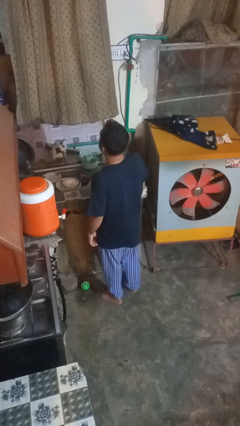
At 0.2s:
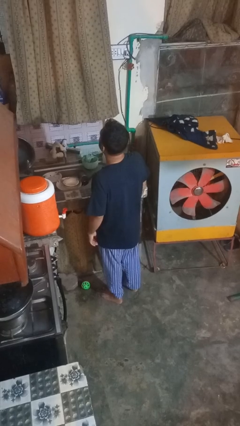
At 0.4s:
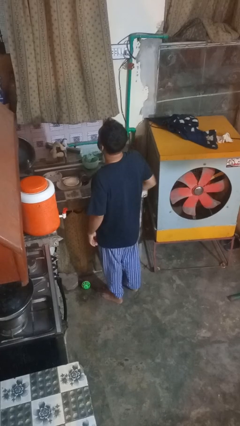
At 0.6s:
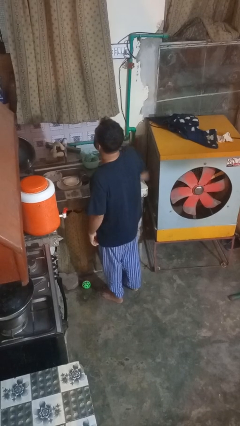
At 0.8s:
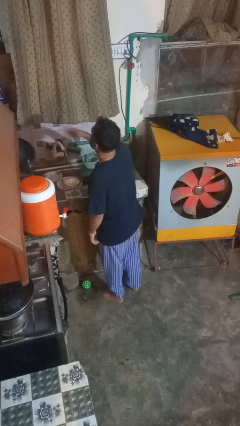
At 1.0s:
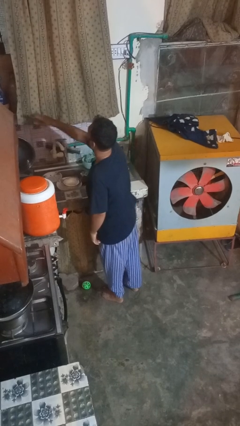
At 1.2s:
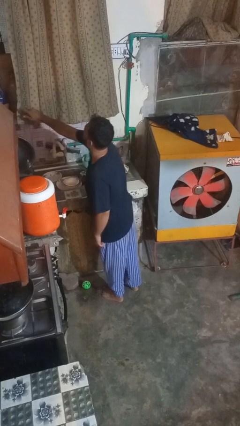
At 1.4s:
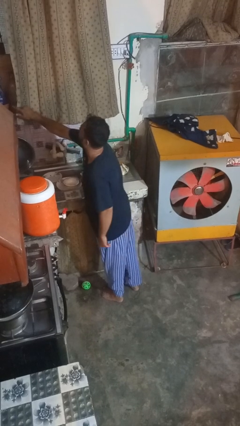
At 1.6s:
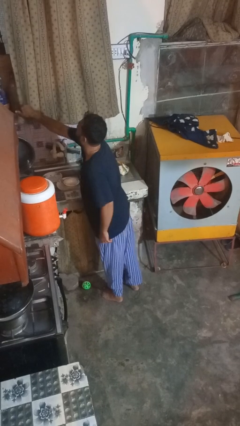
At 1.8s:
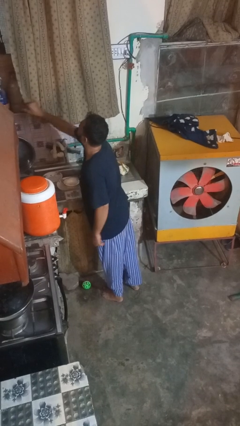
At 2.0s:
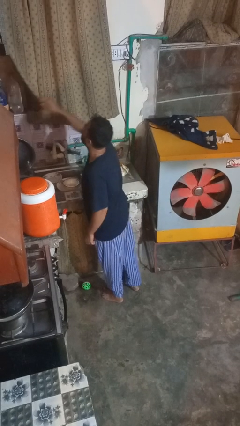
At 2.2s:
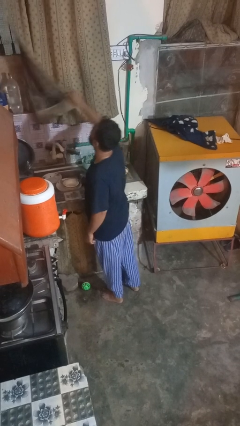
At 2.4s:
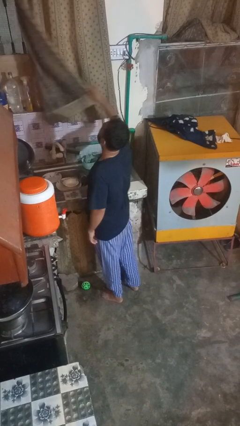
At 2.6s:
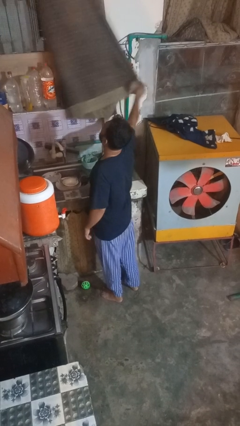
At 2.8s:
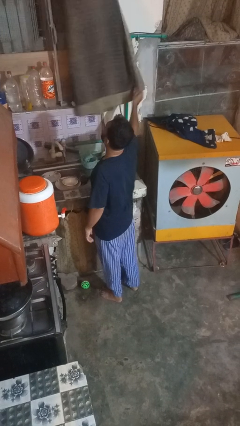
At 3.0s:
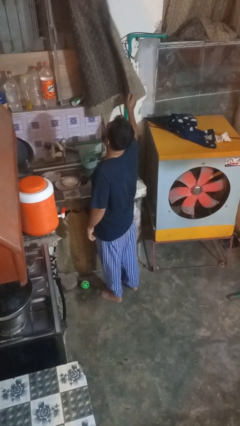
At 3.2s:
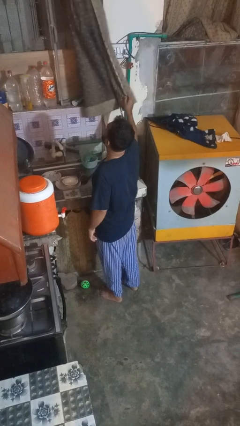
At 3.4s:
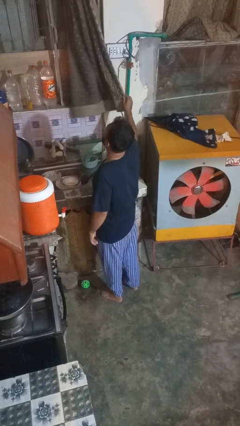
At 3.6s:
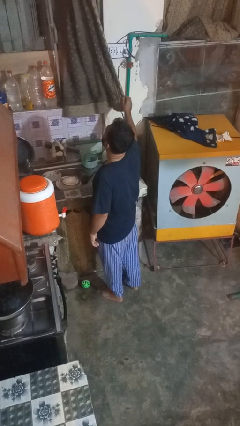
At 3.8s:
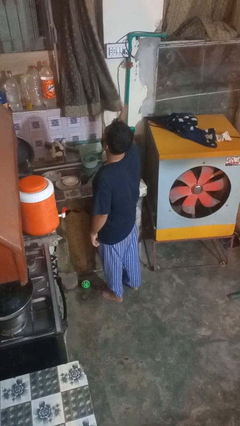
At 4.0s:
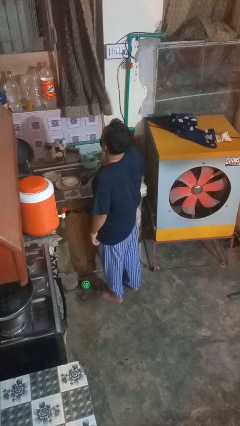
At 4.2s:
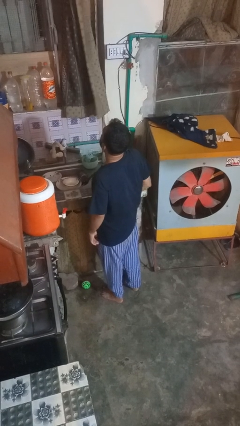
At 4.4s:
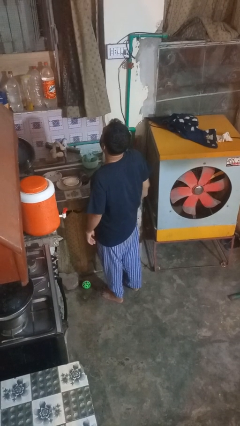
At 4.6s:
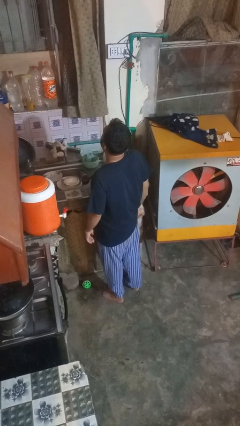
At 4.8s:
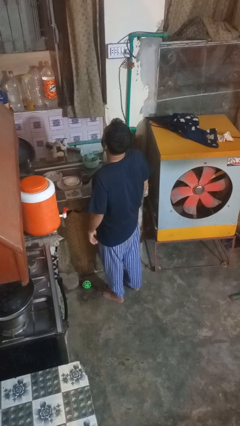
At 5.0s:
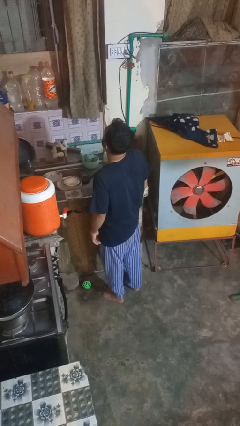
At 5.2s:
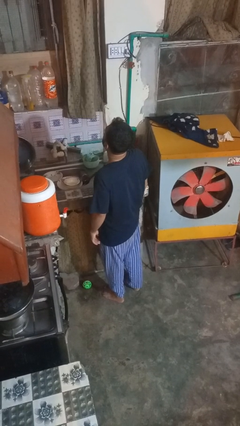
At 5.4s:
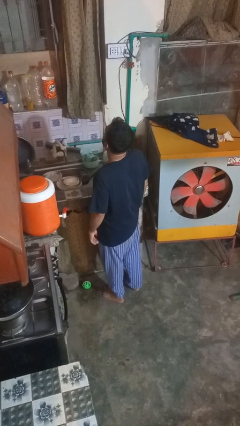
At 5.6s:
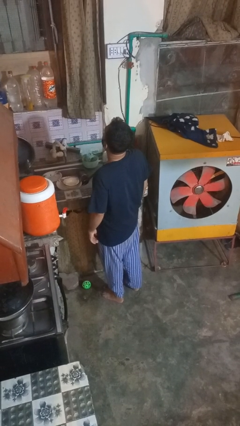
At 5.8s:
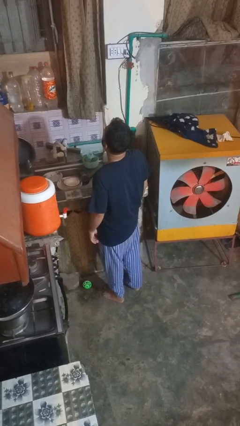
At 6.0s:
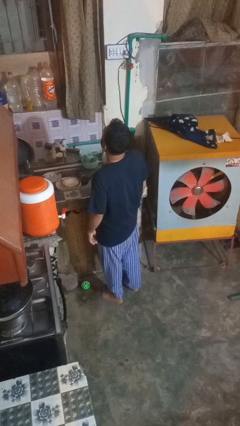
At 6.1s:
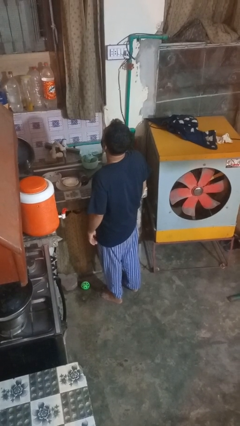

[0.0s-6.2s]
person opens curtains

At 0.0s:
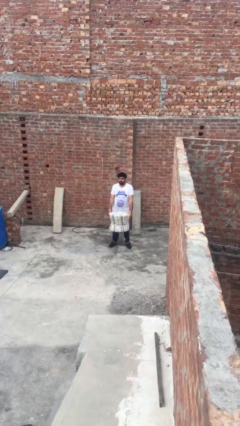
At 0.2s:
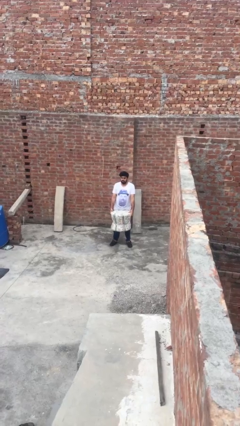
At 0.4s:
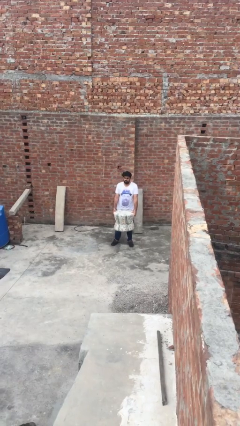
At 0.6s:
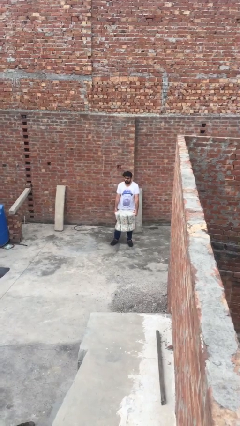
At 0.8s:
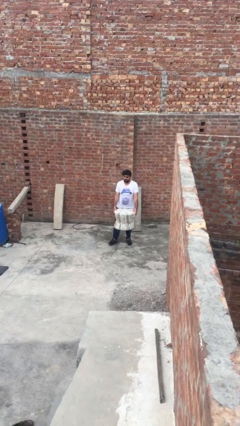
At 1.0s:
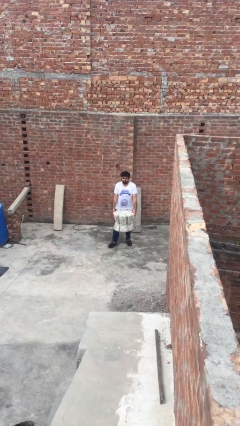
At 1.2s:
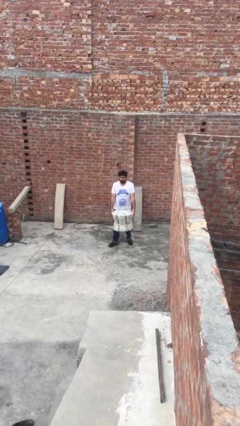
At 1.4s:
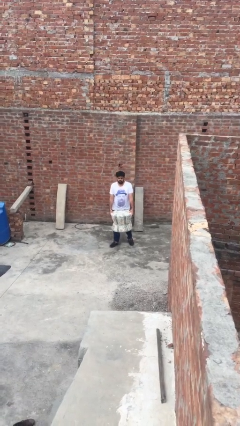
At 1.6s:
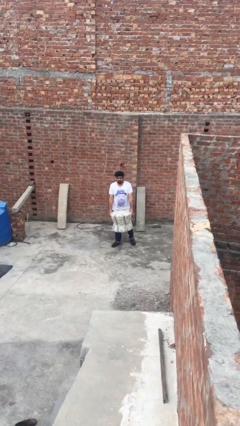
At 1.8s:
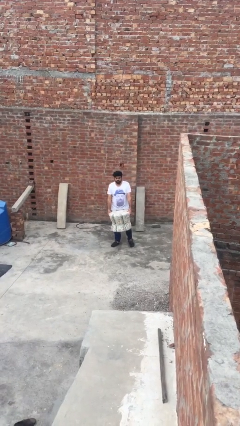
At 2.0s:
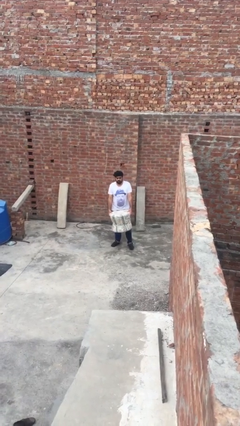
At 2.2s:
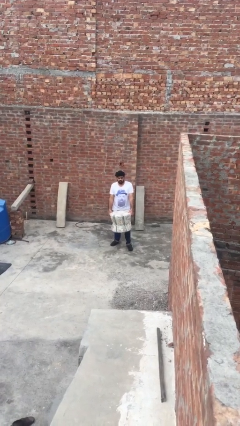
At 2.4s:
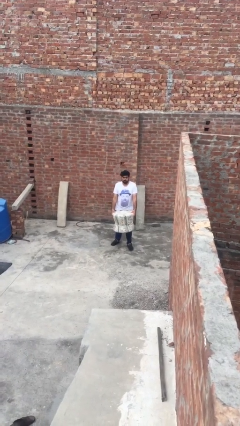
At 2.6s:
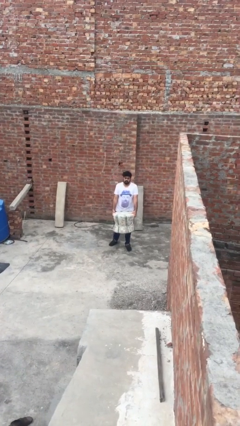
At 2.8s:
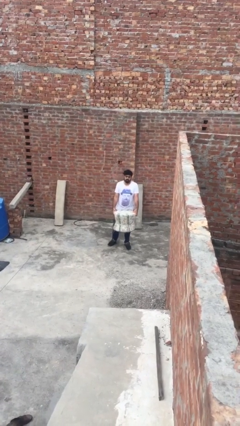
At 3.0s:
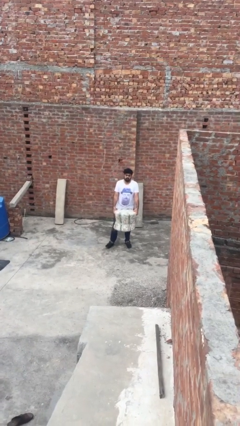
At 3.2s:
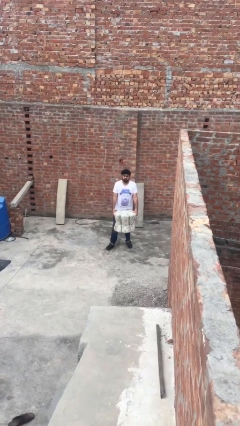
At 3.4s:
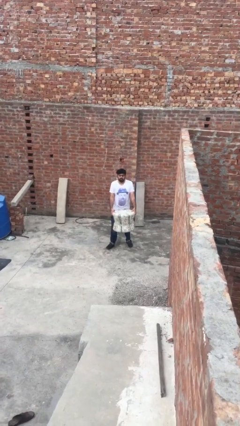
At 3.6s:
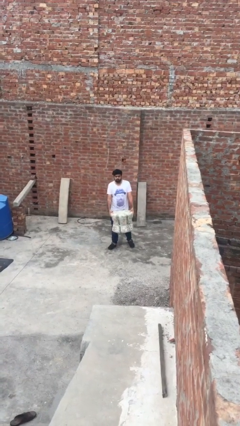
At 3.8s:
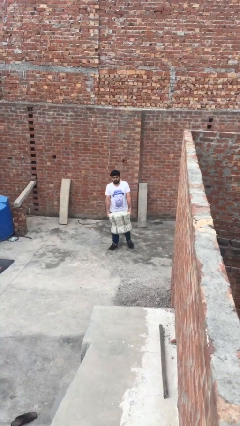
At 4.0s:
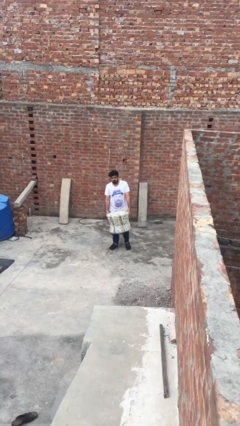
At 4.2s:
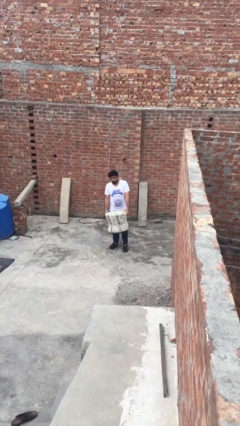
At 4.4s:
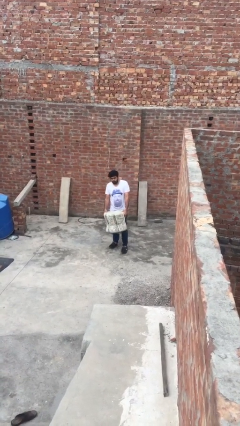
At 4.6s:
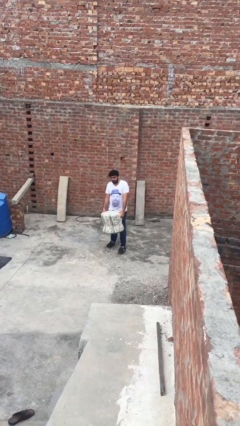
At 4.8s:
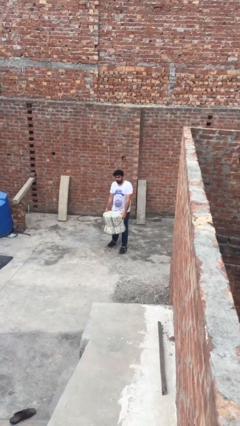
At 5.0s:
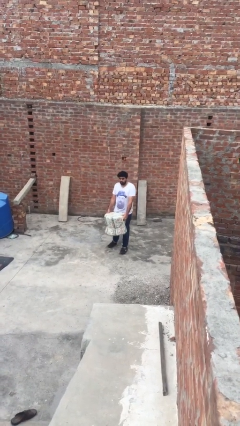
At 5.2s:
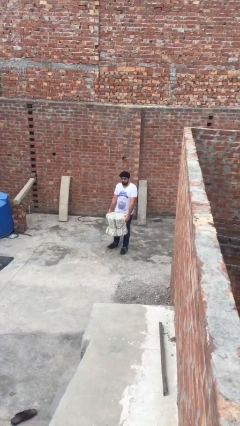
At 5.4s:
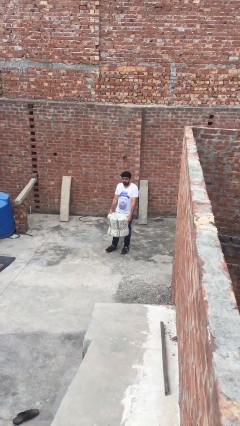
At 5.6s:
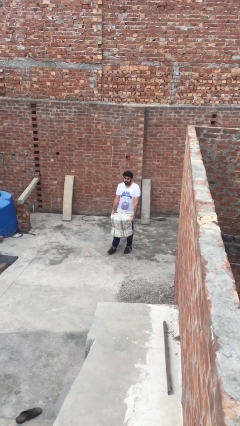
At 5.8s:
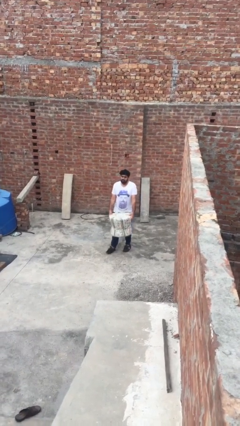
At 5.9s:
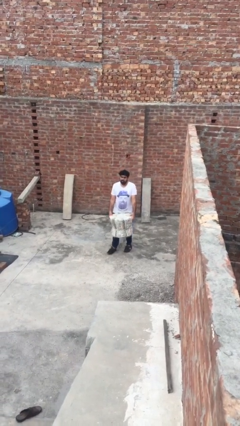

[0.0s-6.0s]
person carries heavy object

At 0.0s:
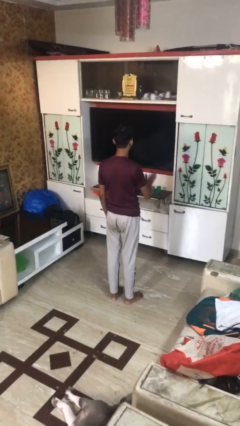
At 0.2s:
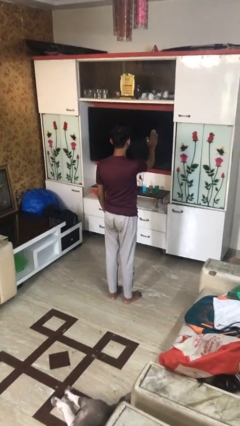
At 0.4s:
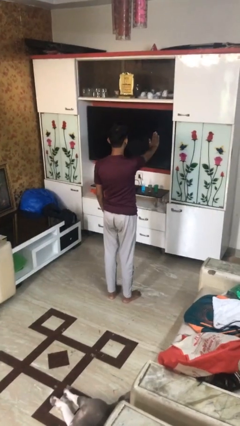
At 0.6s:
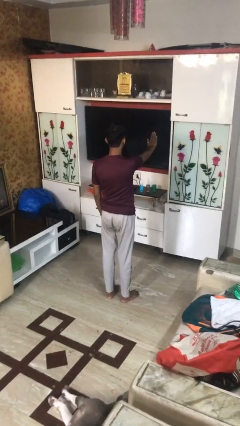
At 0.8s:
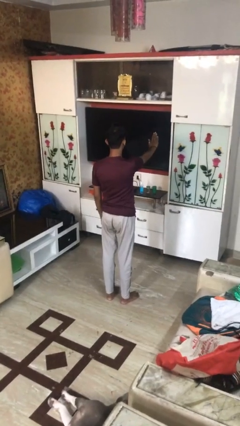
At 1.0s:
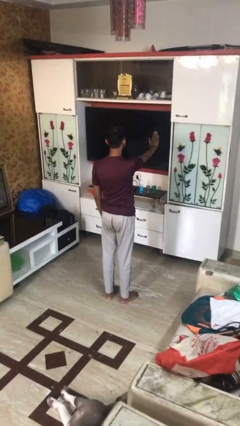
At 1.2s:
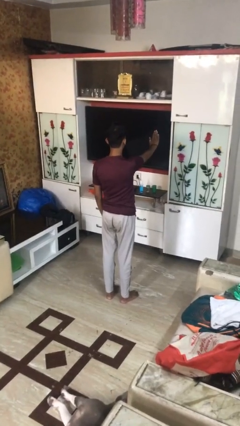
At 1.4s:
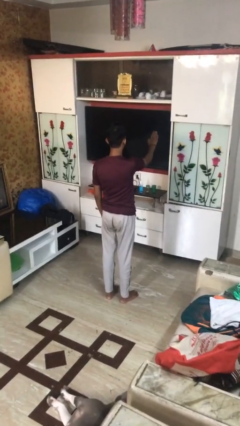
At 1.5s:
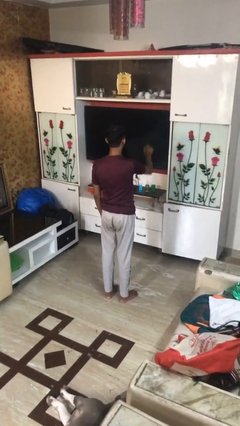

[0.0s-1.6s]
person gestures stop

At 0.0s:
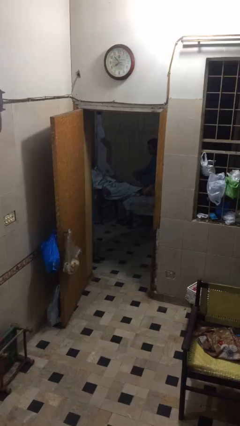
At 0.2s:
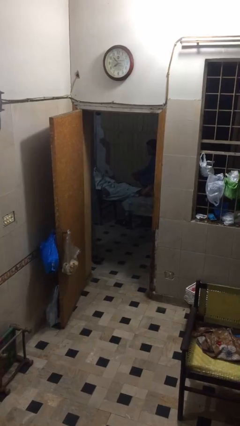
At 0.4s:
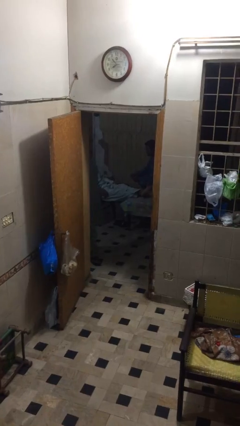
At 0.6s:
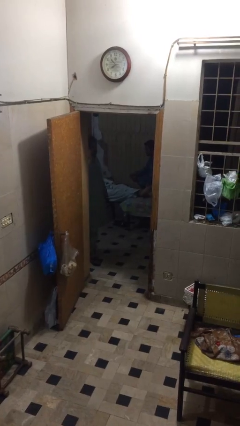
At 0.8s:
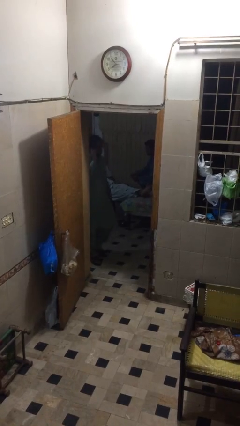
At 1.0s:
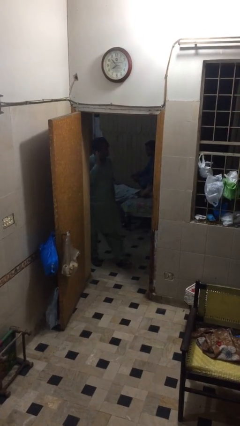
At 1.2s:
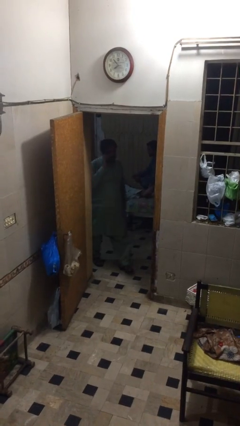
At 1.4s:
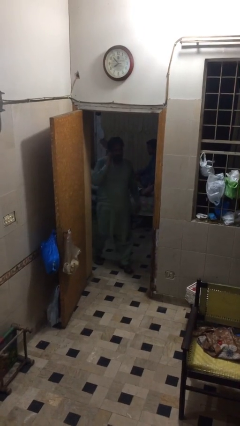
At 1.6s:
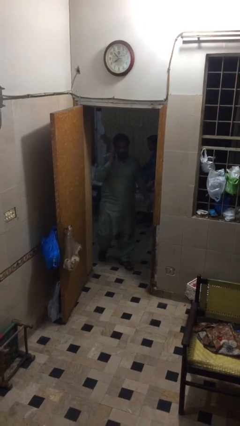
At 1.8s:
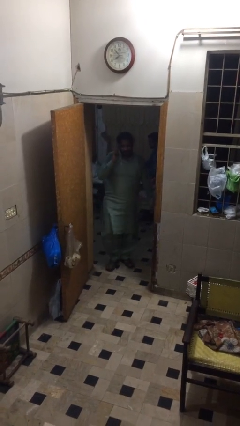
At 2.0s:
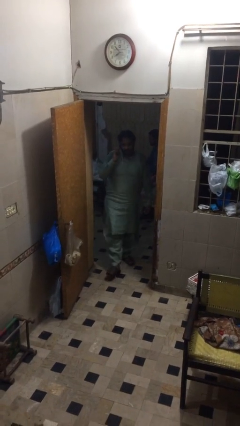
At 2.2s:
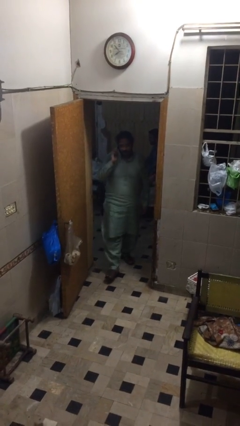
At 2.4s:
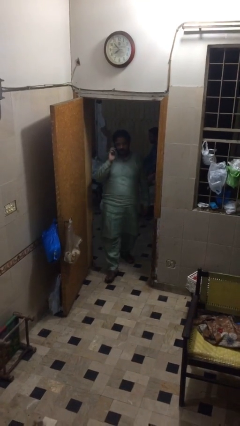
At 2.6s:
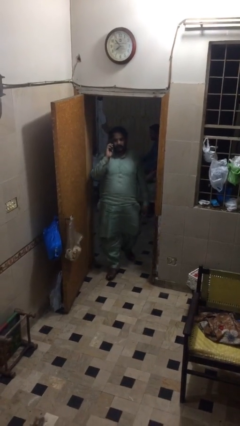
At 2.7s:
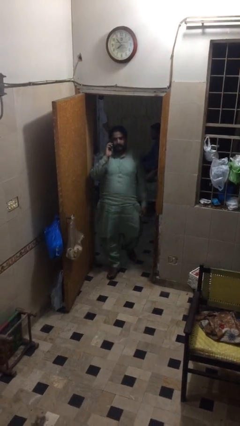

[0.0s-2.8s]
person enters scene through structure

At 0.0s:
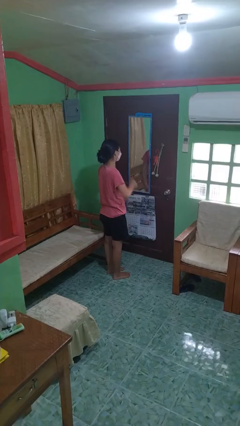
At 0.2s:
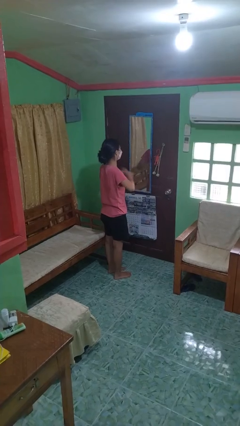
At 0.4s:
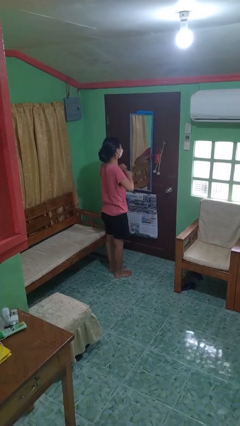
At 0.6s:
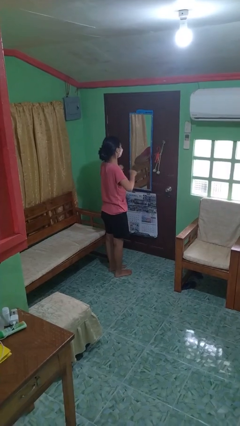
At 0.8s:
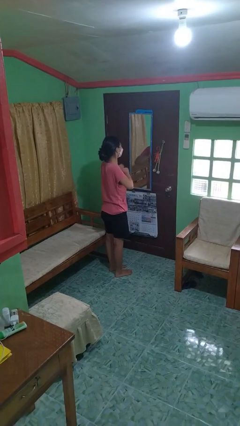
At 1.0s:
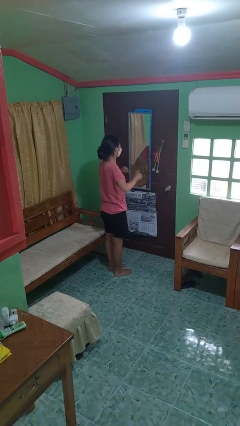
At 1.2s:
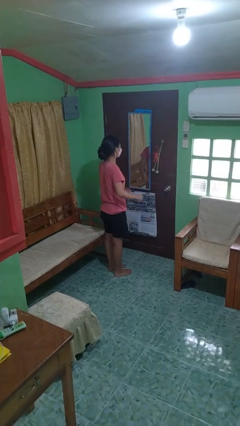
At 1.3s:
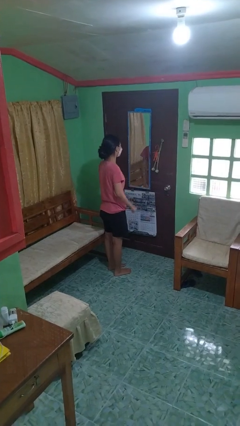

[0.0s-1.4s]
person drums on chest
